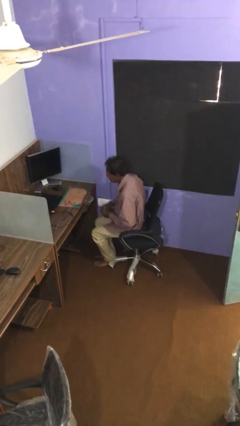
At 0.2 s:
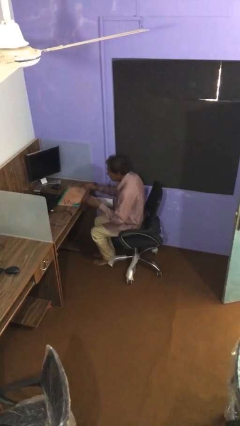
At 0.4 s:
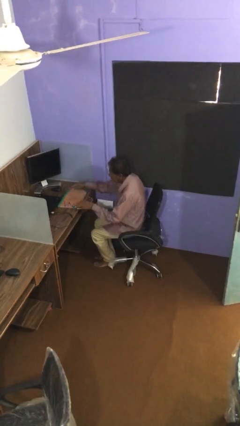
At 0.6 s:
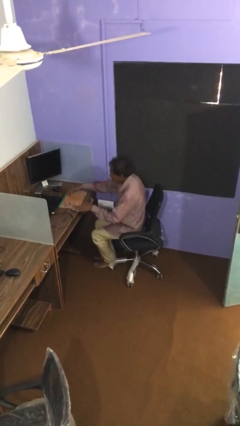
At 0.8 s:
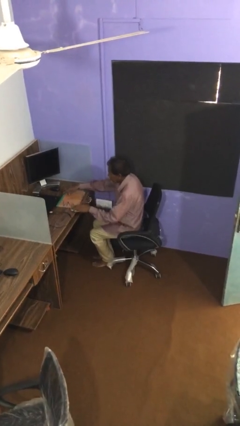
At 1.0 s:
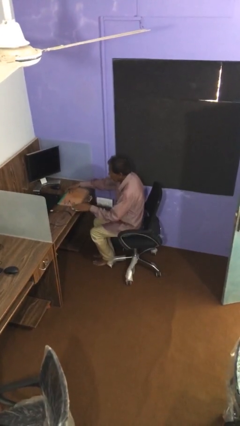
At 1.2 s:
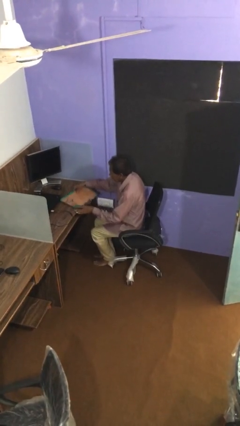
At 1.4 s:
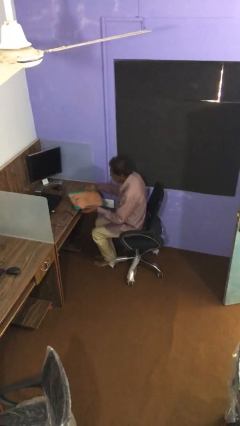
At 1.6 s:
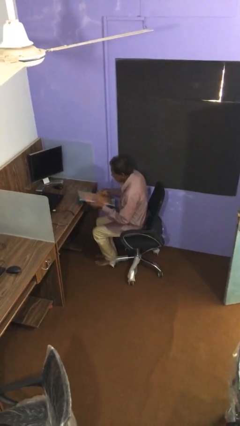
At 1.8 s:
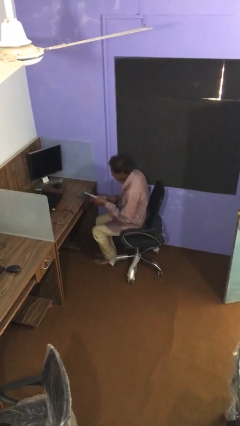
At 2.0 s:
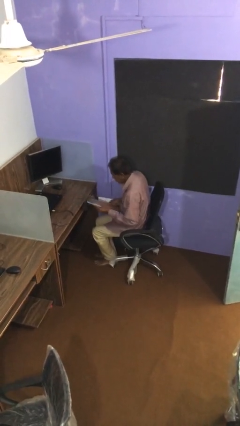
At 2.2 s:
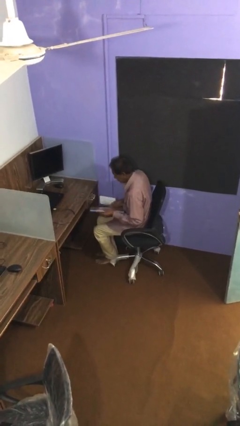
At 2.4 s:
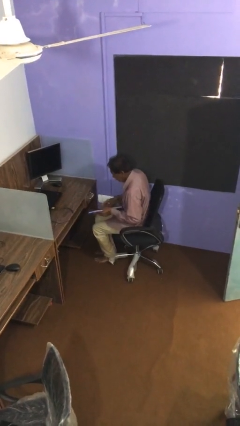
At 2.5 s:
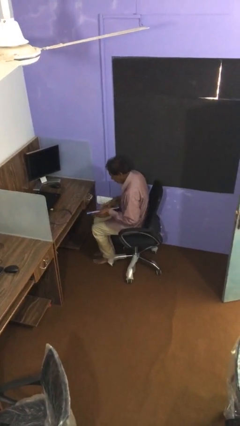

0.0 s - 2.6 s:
person picks up object from table

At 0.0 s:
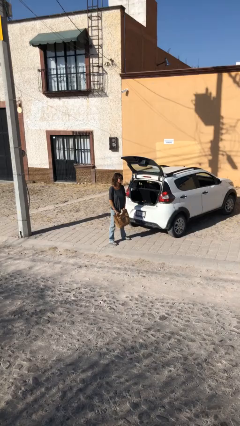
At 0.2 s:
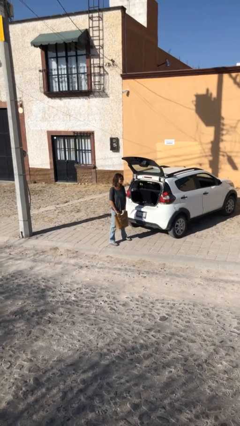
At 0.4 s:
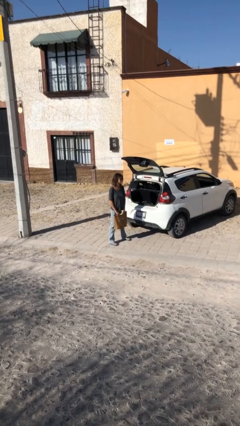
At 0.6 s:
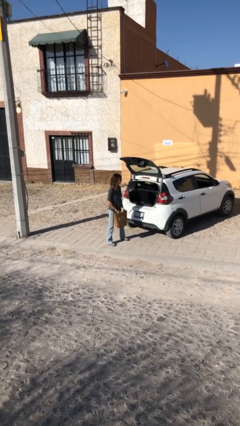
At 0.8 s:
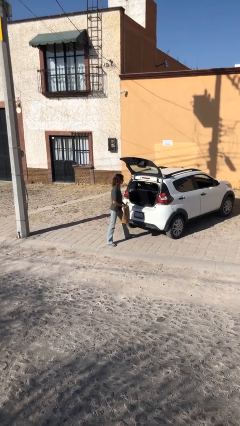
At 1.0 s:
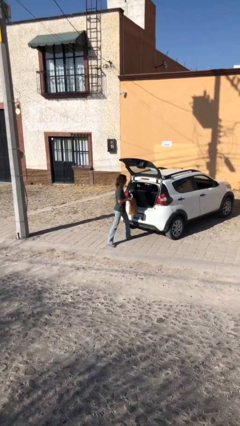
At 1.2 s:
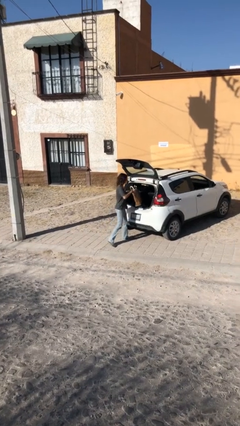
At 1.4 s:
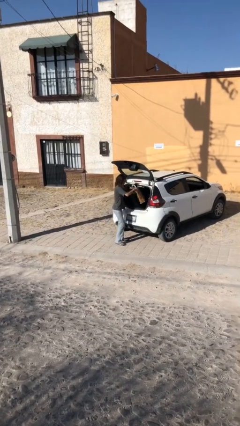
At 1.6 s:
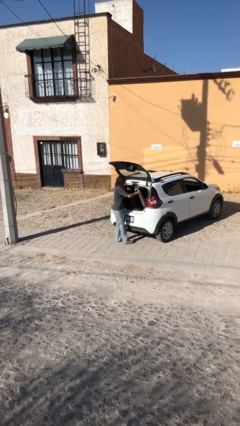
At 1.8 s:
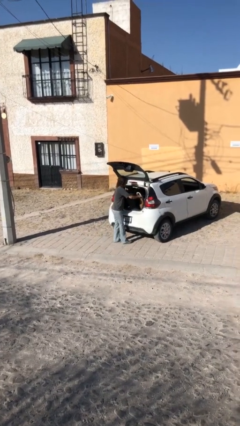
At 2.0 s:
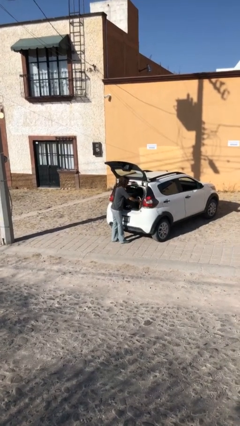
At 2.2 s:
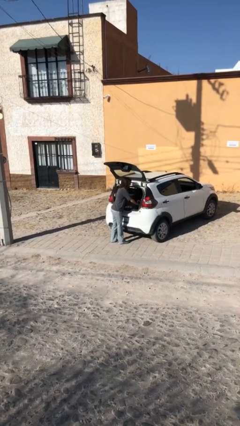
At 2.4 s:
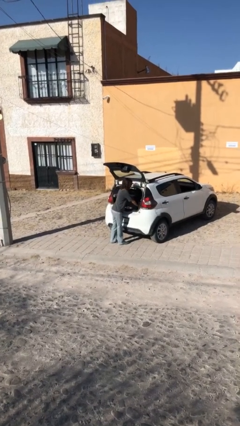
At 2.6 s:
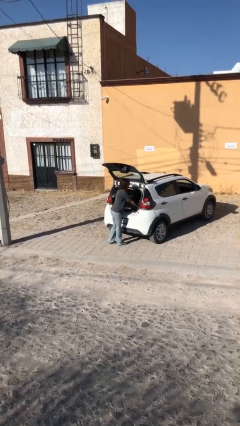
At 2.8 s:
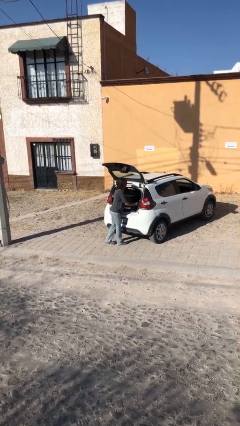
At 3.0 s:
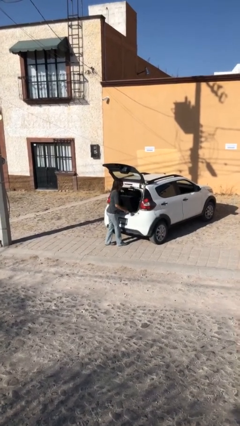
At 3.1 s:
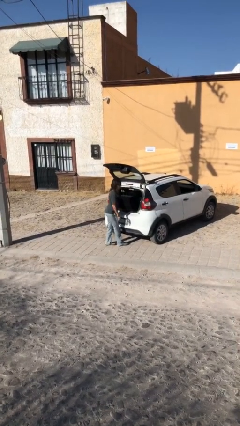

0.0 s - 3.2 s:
person loads car

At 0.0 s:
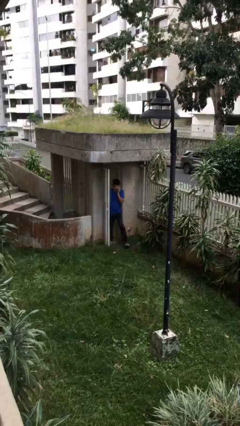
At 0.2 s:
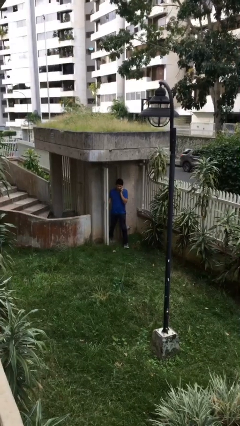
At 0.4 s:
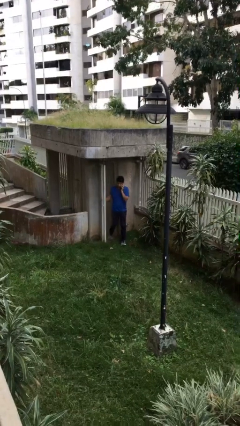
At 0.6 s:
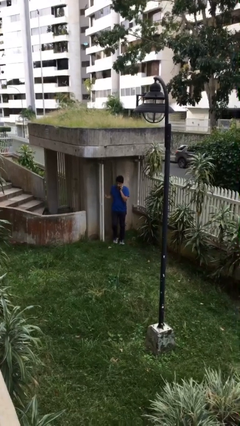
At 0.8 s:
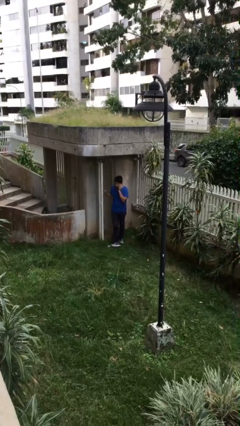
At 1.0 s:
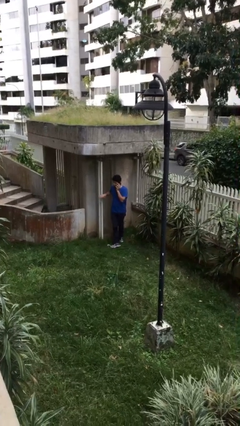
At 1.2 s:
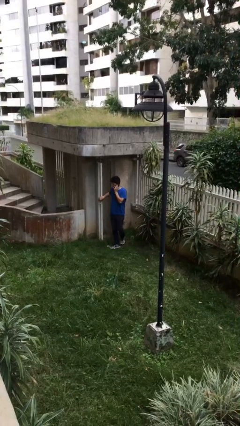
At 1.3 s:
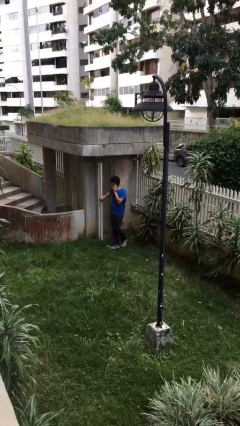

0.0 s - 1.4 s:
person enters scene through structure

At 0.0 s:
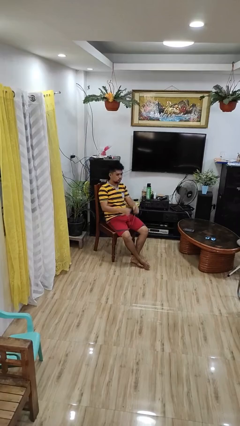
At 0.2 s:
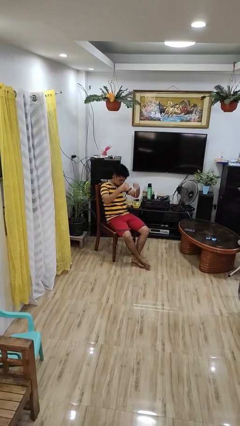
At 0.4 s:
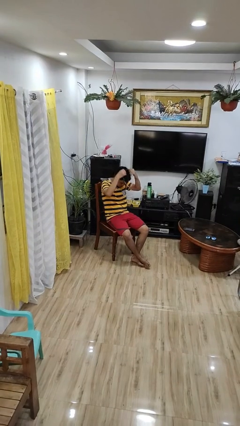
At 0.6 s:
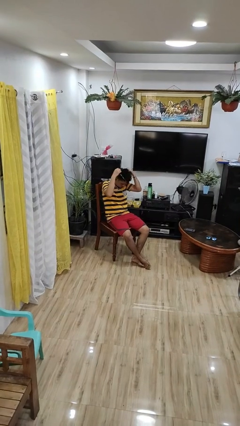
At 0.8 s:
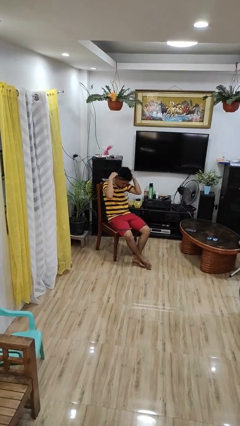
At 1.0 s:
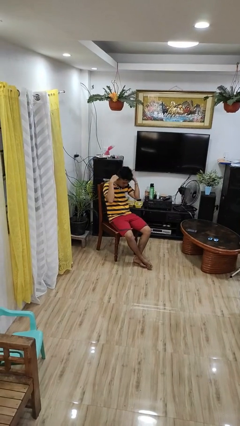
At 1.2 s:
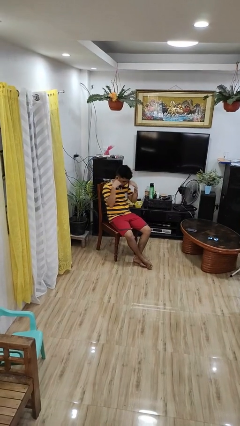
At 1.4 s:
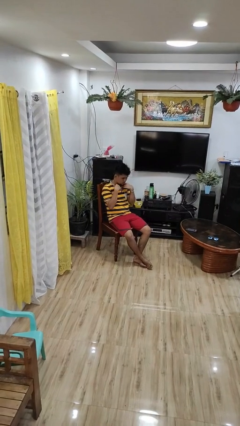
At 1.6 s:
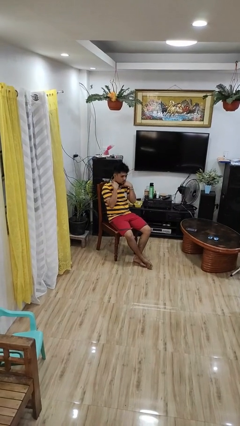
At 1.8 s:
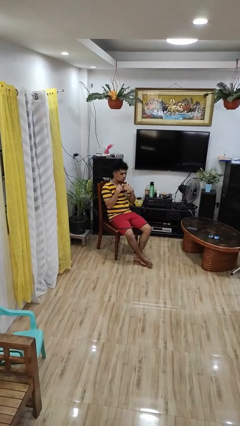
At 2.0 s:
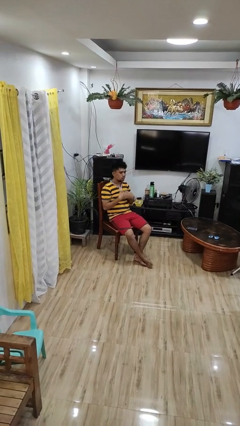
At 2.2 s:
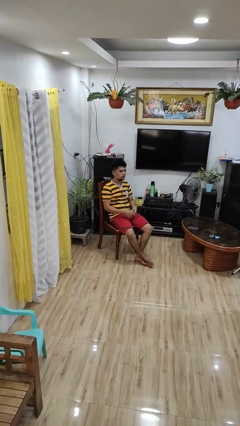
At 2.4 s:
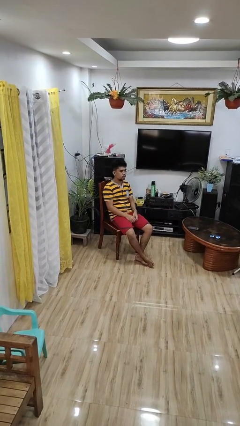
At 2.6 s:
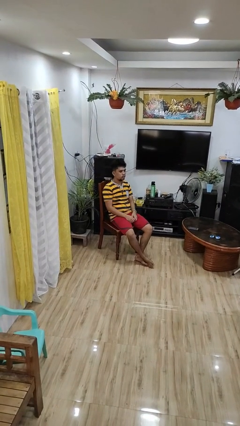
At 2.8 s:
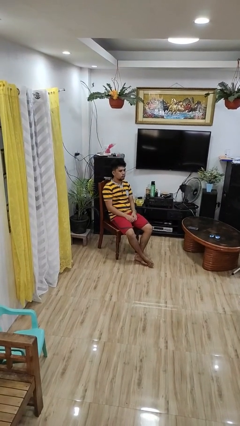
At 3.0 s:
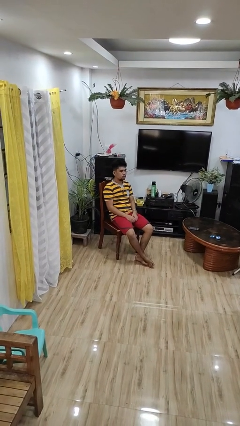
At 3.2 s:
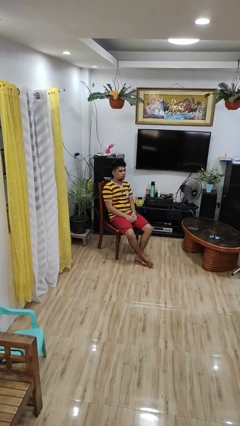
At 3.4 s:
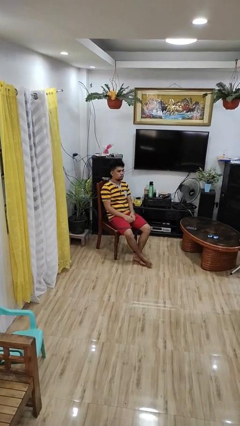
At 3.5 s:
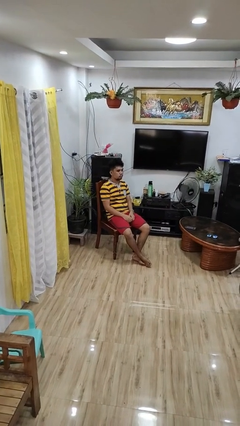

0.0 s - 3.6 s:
person puts on necklace

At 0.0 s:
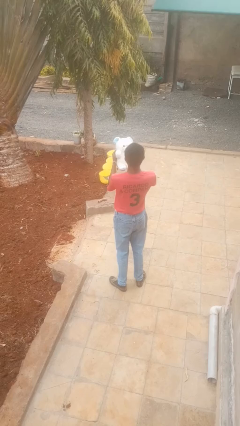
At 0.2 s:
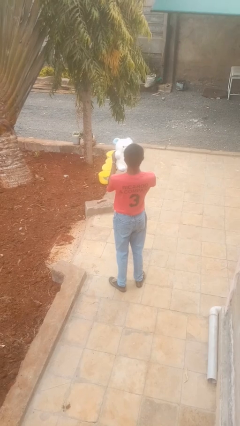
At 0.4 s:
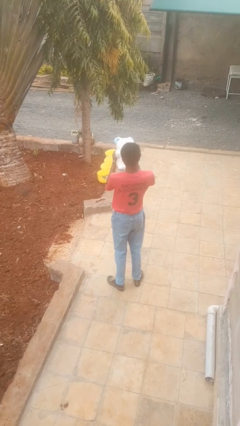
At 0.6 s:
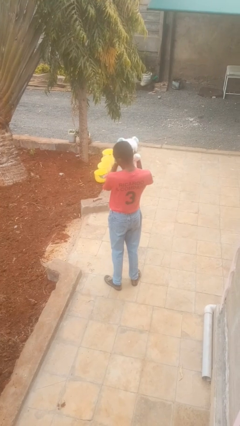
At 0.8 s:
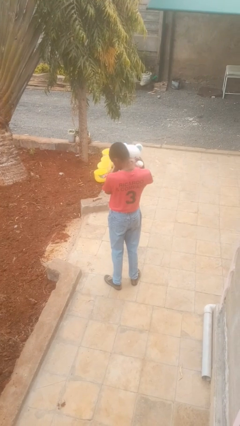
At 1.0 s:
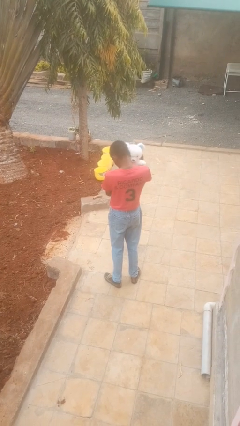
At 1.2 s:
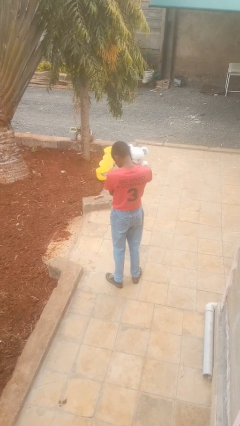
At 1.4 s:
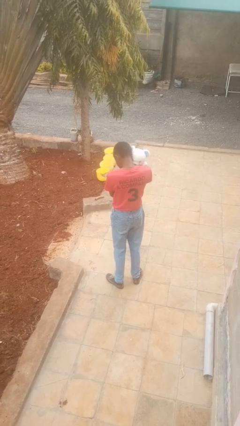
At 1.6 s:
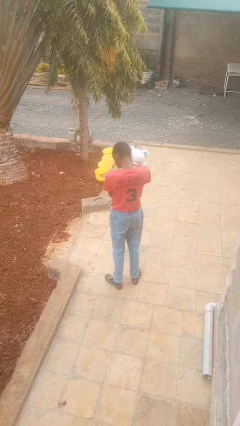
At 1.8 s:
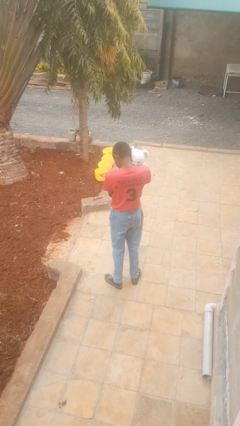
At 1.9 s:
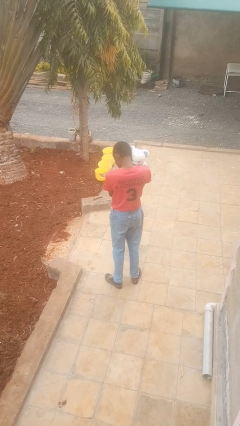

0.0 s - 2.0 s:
person hugs stuffed animal

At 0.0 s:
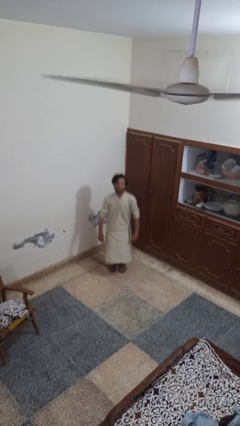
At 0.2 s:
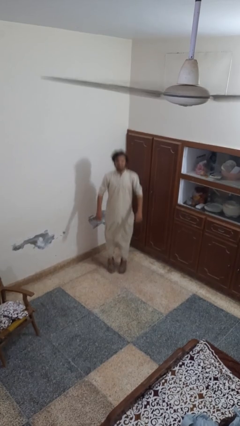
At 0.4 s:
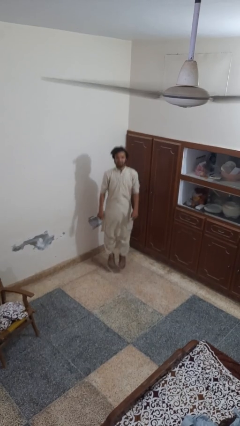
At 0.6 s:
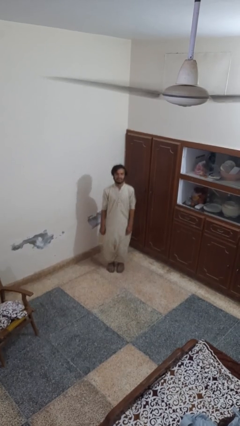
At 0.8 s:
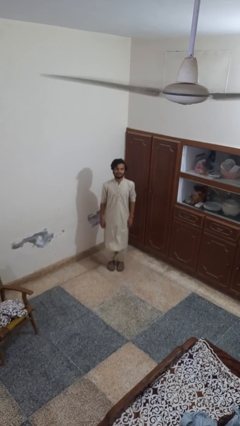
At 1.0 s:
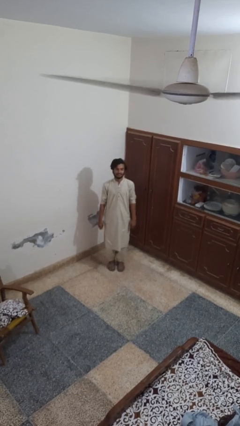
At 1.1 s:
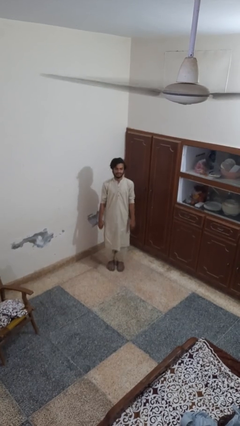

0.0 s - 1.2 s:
person jumps

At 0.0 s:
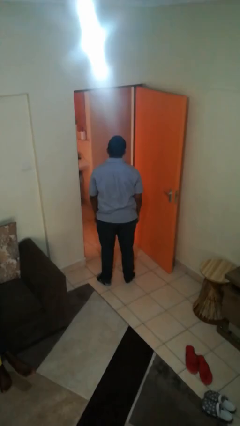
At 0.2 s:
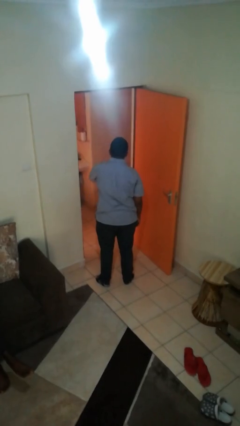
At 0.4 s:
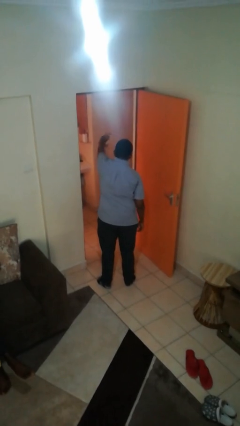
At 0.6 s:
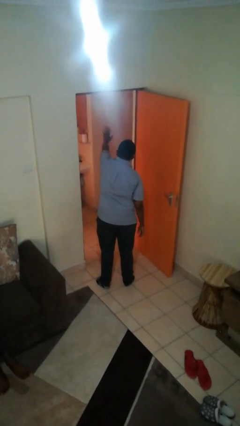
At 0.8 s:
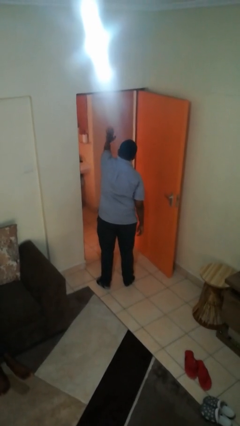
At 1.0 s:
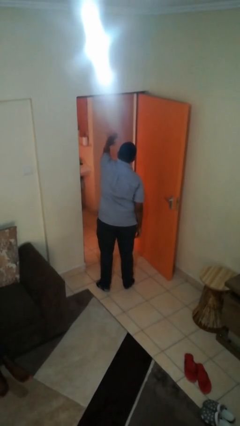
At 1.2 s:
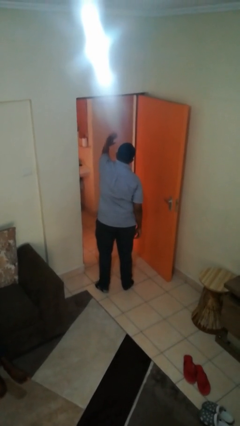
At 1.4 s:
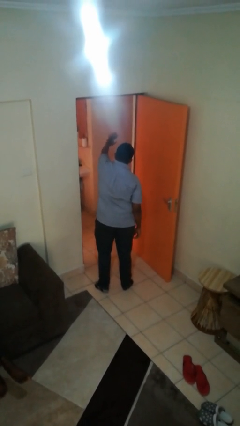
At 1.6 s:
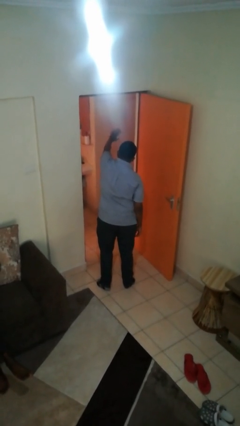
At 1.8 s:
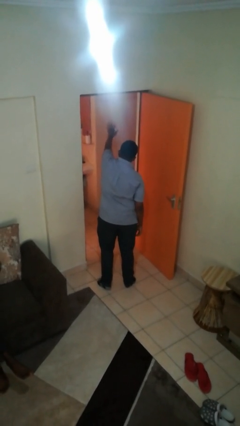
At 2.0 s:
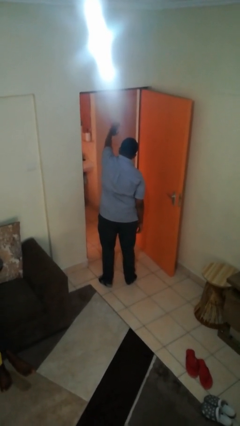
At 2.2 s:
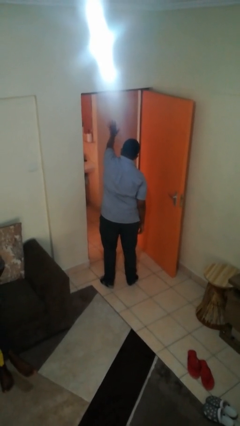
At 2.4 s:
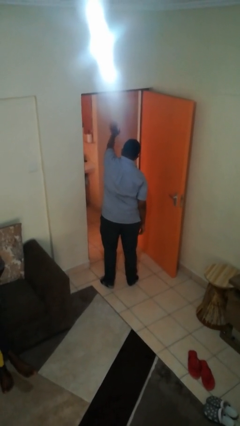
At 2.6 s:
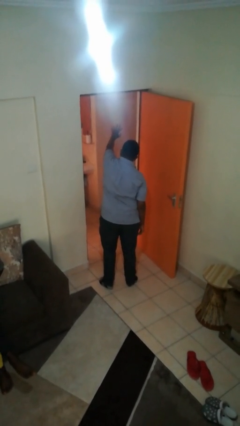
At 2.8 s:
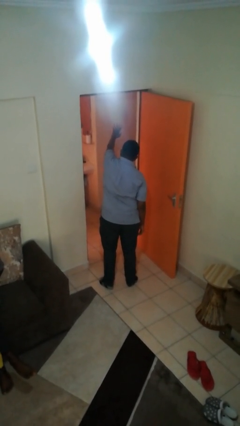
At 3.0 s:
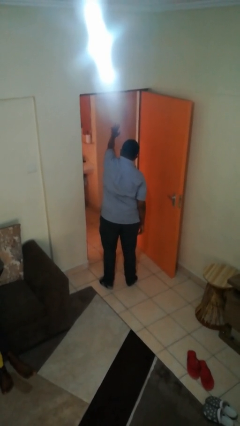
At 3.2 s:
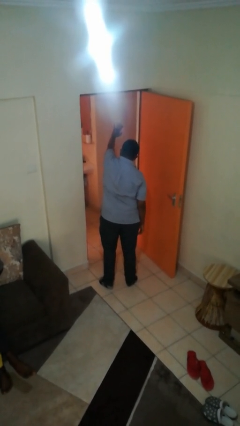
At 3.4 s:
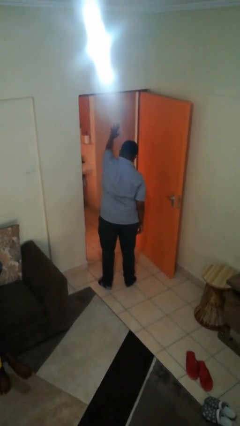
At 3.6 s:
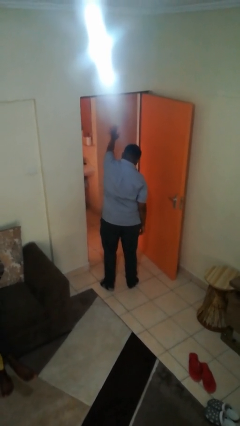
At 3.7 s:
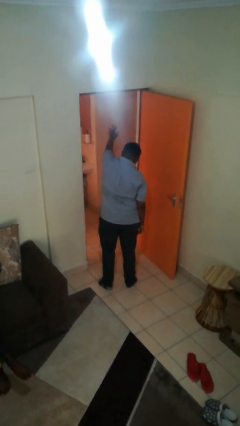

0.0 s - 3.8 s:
person waves at person
